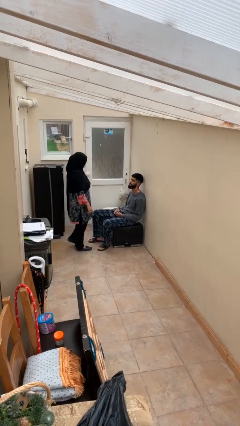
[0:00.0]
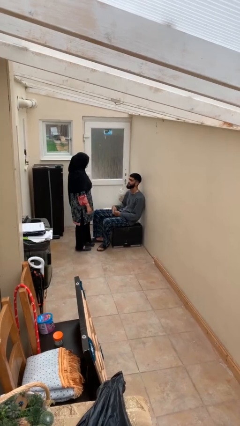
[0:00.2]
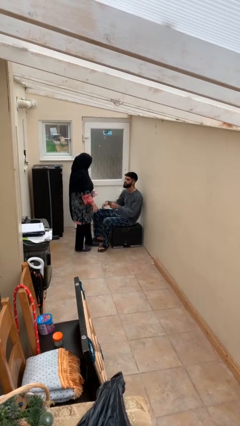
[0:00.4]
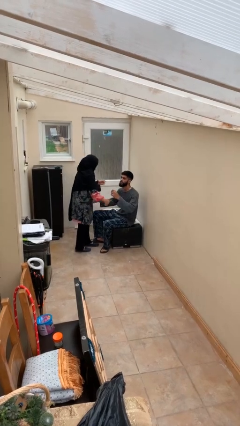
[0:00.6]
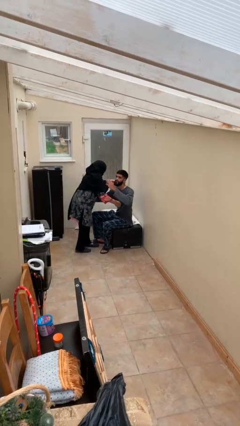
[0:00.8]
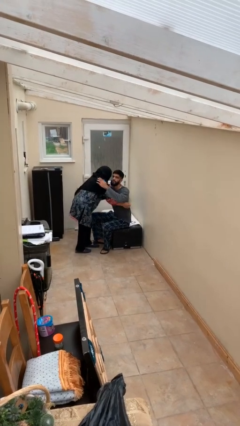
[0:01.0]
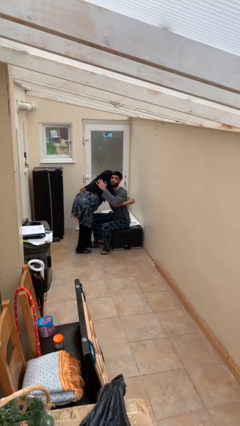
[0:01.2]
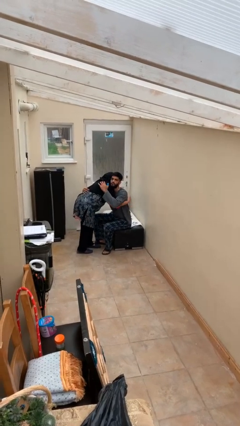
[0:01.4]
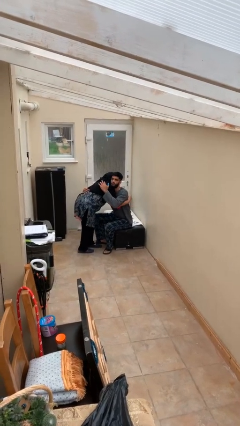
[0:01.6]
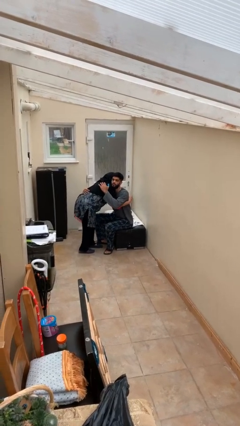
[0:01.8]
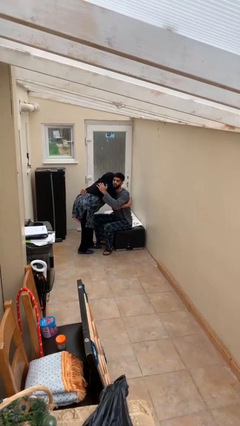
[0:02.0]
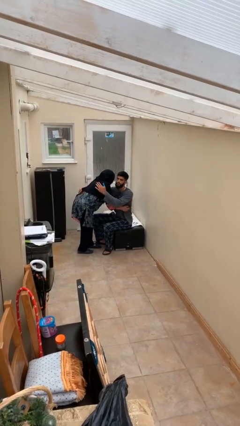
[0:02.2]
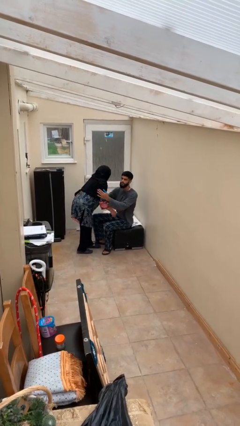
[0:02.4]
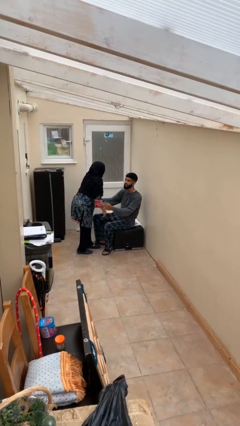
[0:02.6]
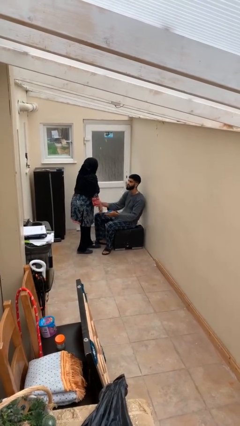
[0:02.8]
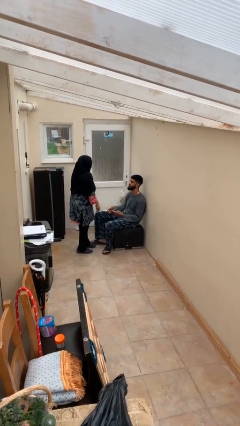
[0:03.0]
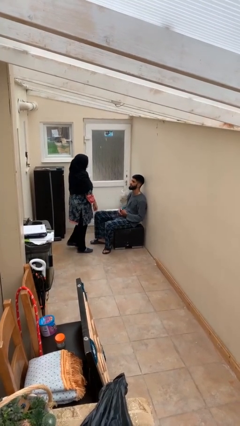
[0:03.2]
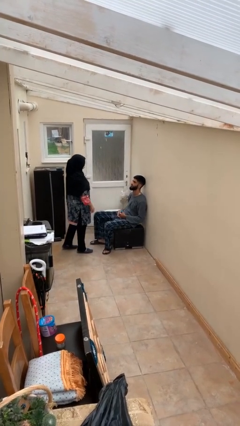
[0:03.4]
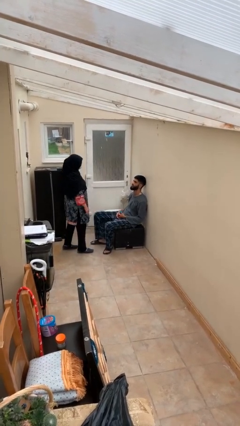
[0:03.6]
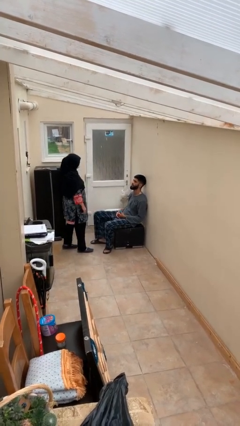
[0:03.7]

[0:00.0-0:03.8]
person embraces person

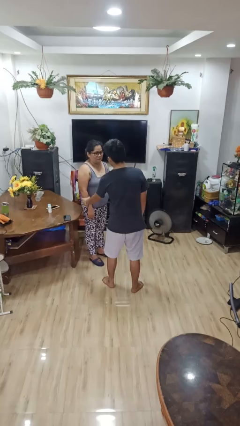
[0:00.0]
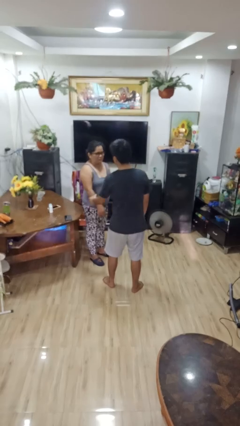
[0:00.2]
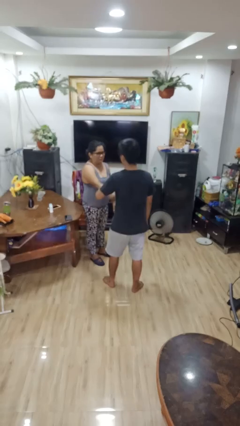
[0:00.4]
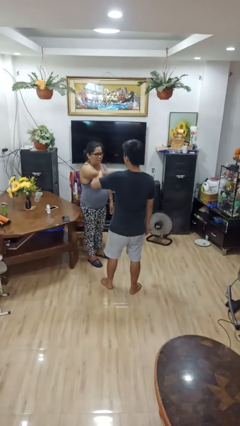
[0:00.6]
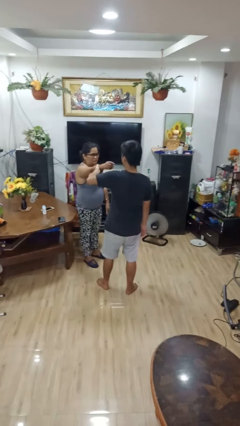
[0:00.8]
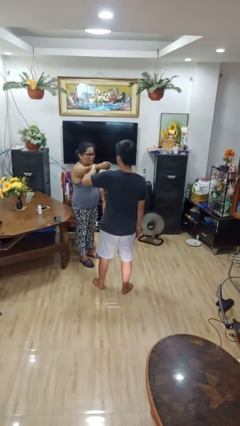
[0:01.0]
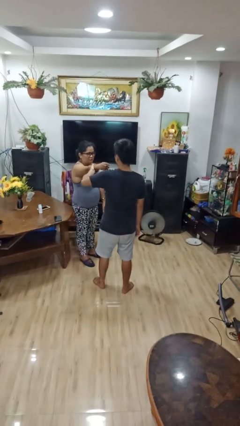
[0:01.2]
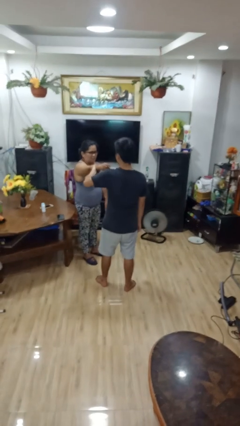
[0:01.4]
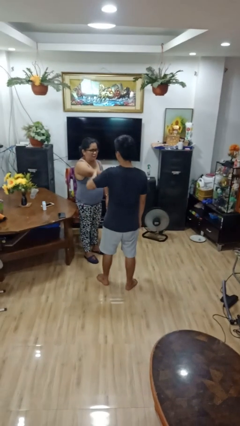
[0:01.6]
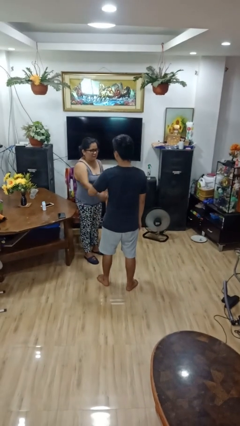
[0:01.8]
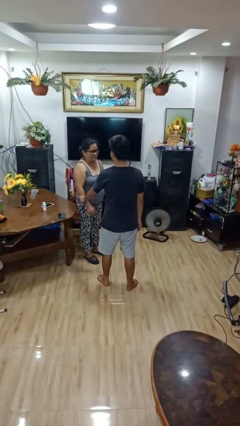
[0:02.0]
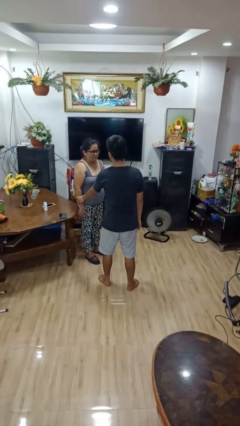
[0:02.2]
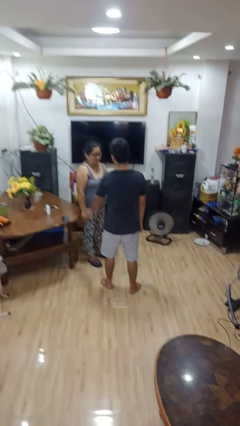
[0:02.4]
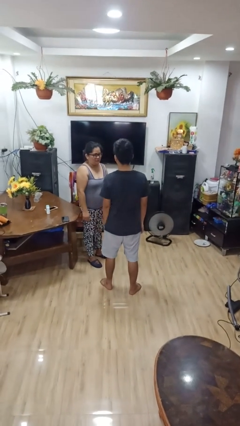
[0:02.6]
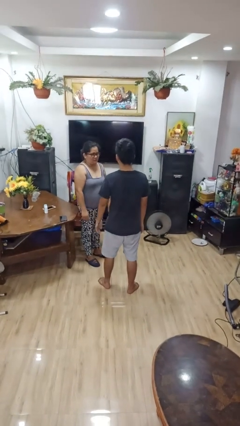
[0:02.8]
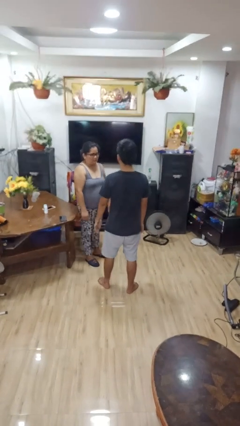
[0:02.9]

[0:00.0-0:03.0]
person grabs person by forearm

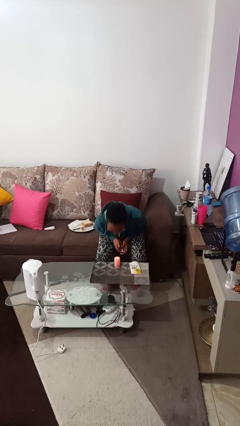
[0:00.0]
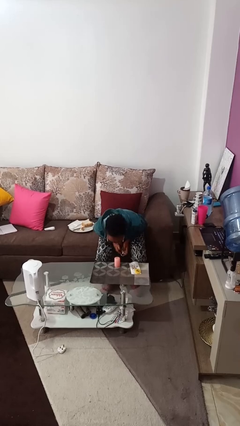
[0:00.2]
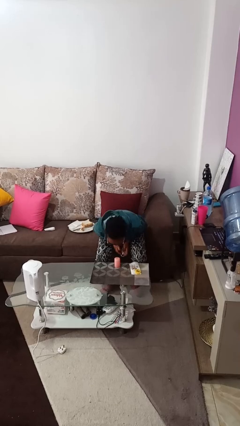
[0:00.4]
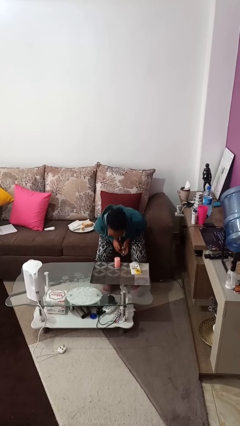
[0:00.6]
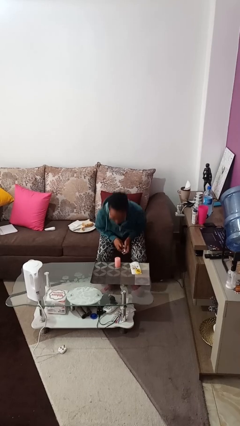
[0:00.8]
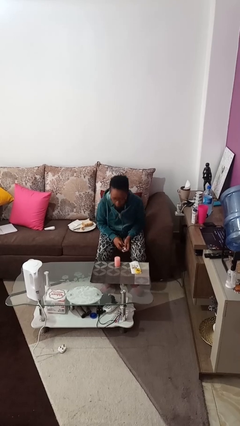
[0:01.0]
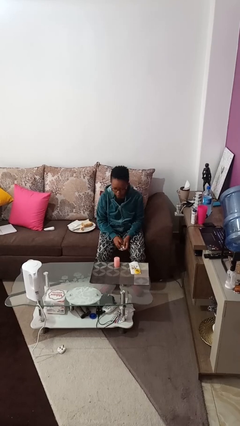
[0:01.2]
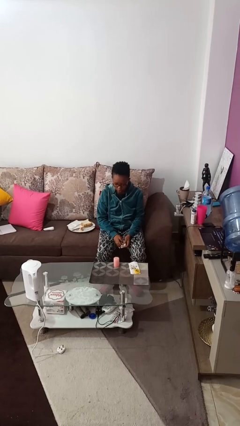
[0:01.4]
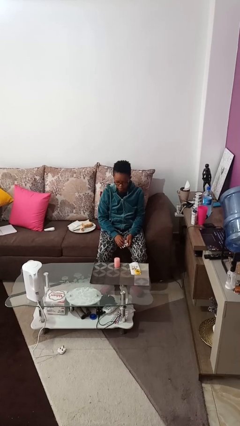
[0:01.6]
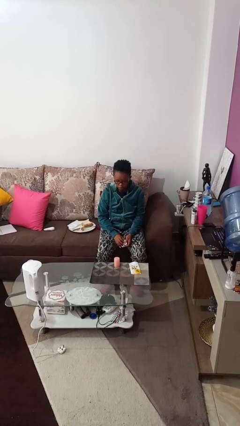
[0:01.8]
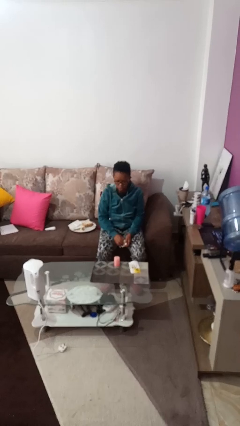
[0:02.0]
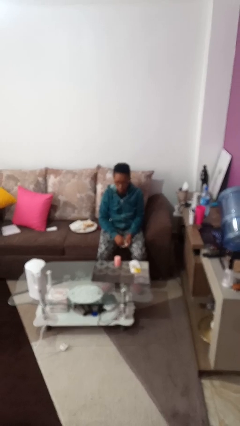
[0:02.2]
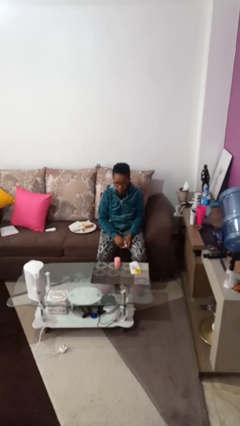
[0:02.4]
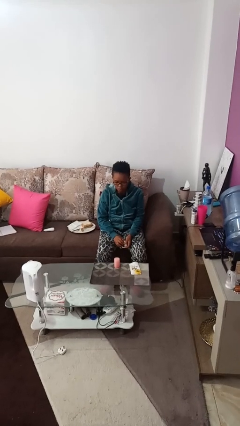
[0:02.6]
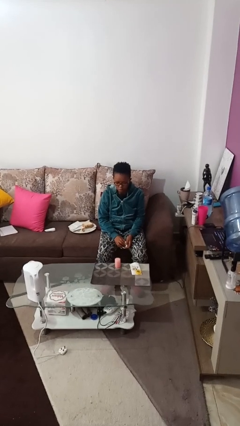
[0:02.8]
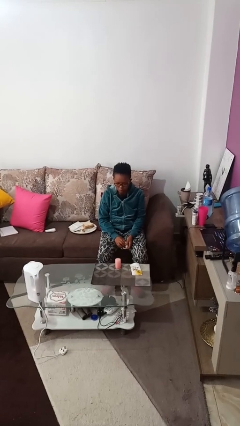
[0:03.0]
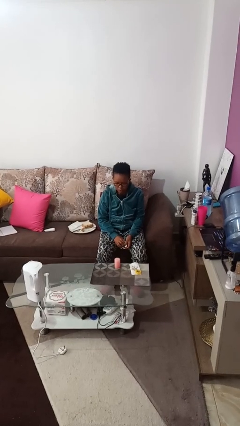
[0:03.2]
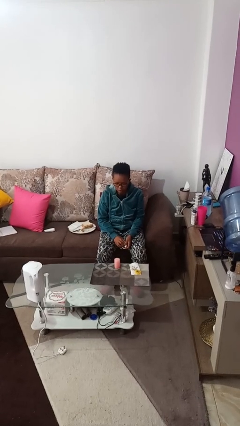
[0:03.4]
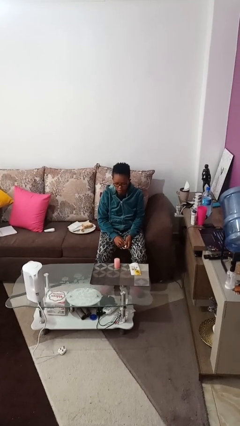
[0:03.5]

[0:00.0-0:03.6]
person extinguishes candle

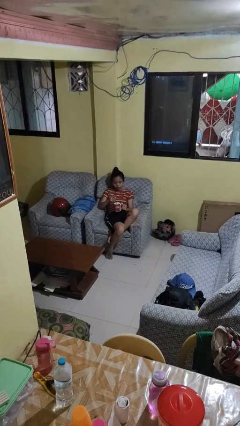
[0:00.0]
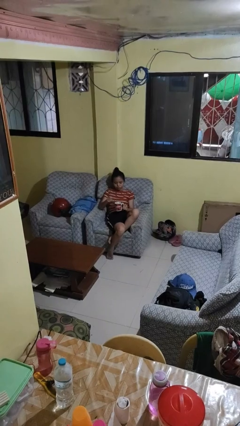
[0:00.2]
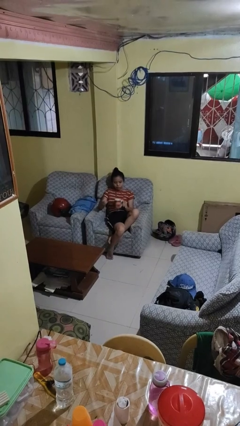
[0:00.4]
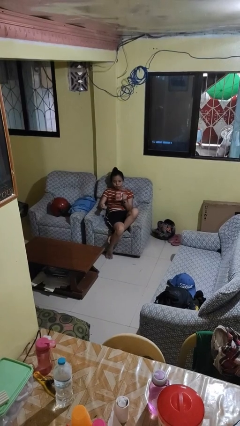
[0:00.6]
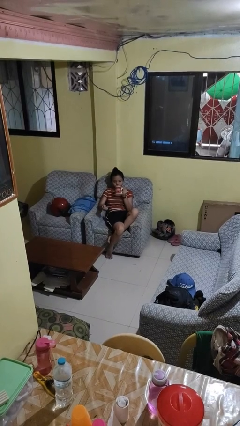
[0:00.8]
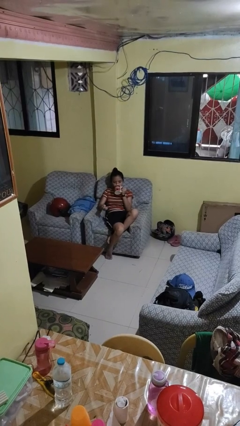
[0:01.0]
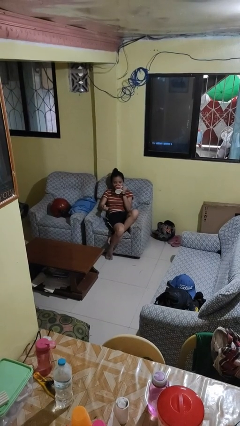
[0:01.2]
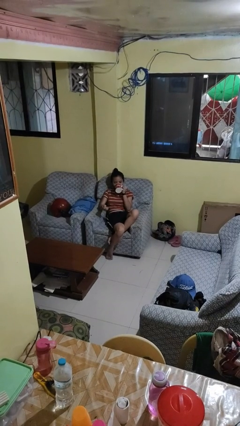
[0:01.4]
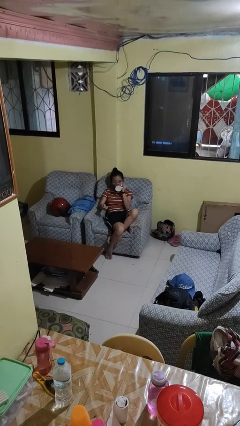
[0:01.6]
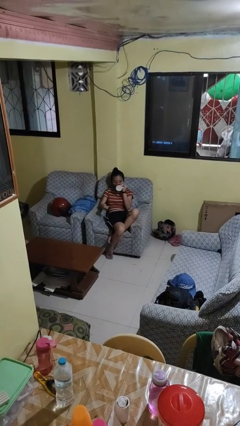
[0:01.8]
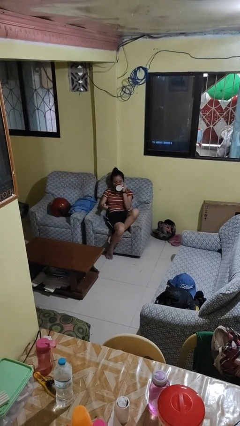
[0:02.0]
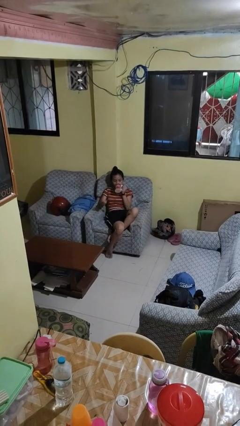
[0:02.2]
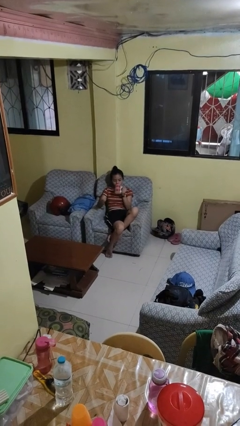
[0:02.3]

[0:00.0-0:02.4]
person drinks from mug

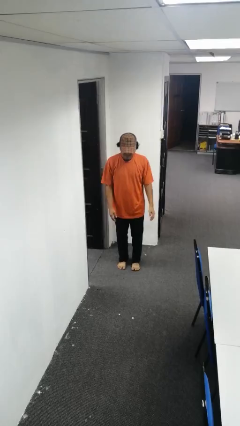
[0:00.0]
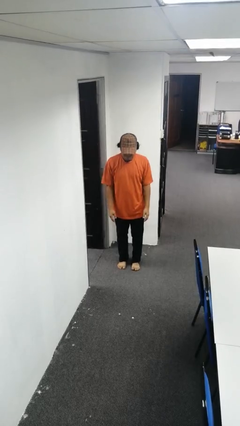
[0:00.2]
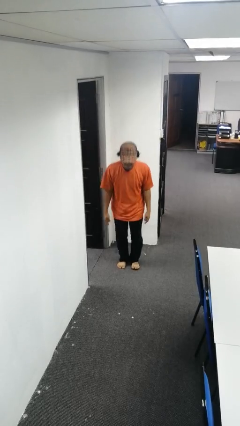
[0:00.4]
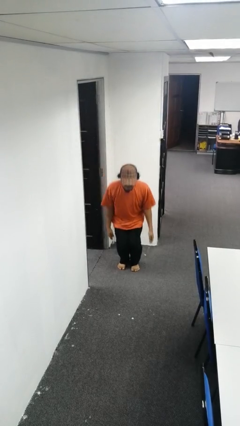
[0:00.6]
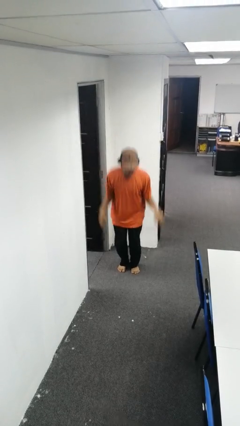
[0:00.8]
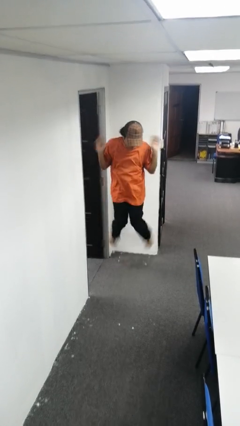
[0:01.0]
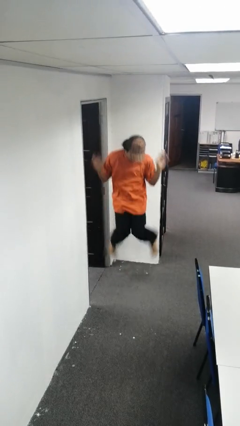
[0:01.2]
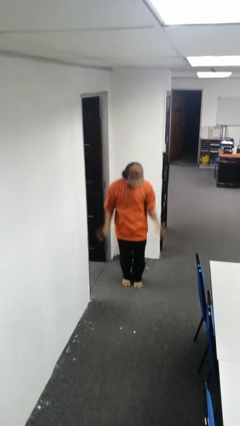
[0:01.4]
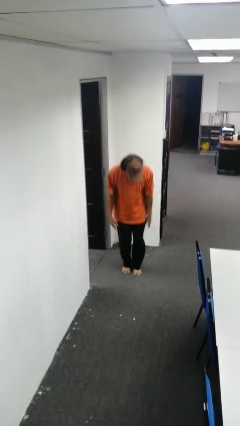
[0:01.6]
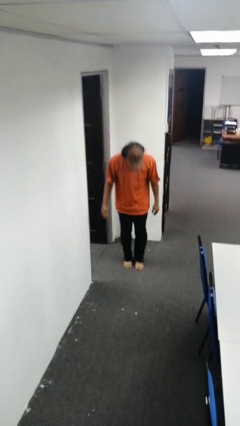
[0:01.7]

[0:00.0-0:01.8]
person jumps

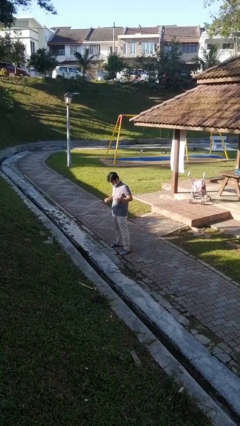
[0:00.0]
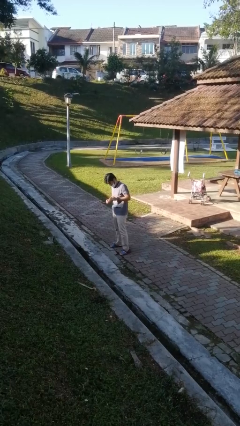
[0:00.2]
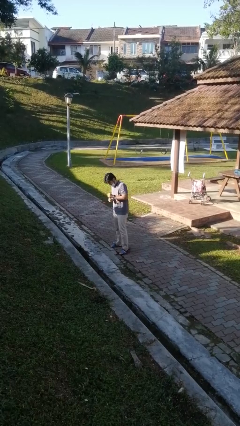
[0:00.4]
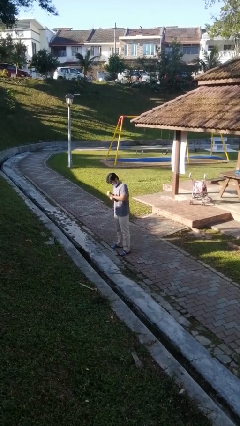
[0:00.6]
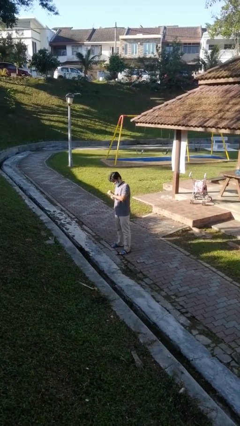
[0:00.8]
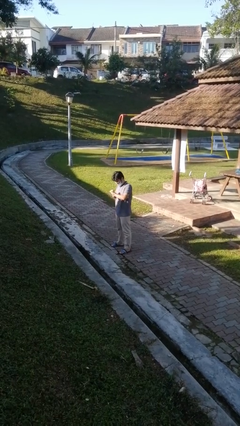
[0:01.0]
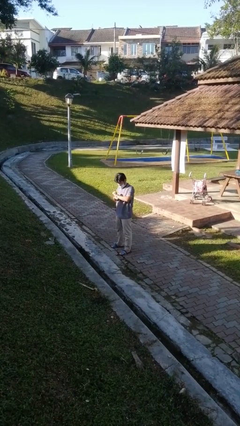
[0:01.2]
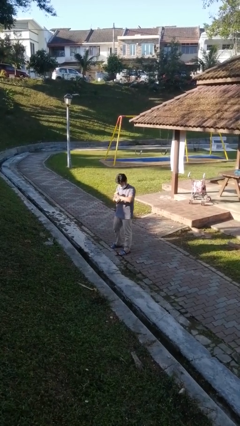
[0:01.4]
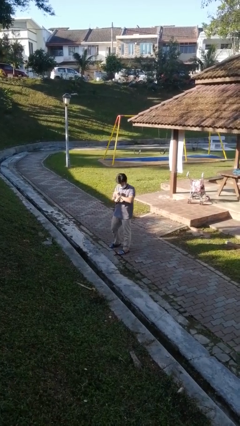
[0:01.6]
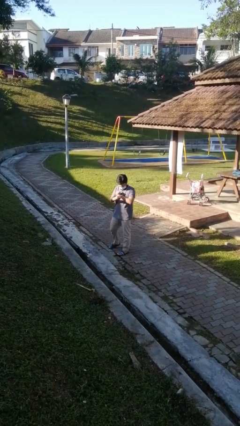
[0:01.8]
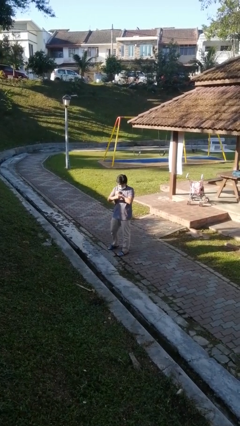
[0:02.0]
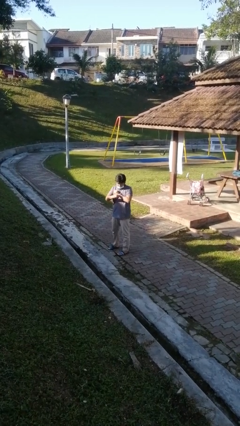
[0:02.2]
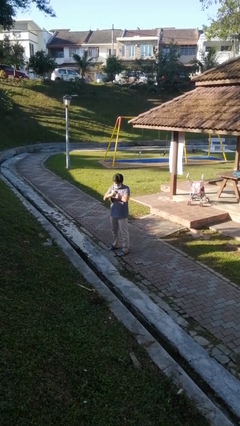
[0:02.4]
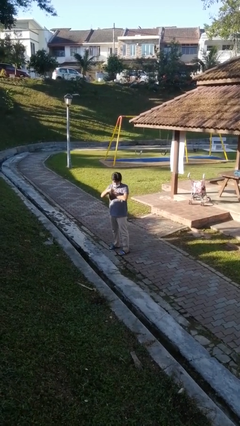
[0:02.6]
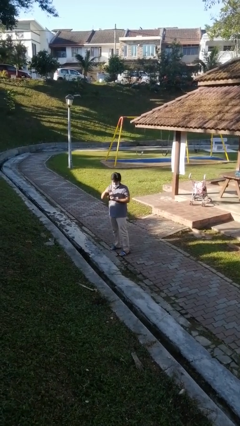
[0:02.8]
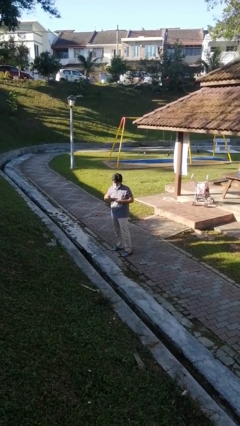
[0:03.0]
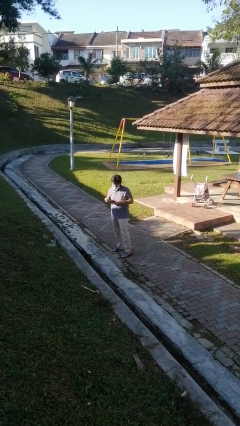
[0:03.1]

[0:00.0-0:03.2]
person takes off wristwatch
